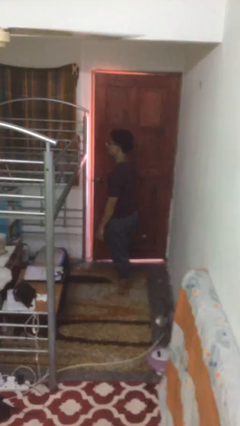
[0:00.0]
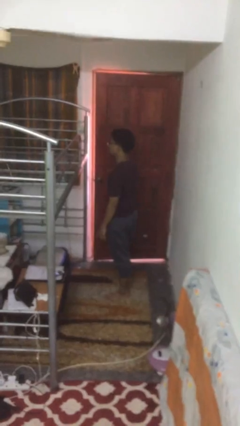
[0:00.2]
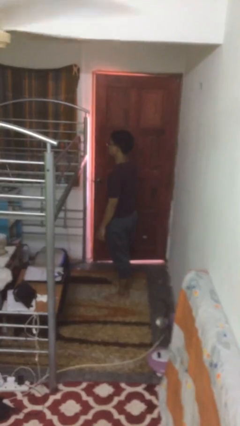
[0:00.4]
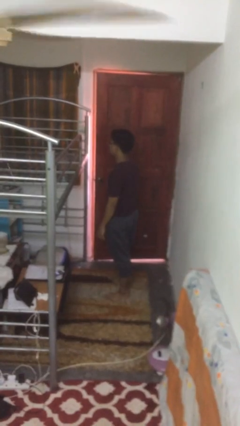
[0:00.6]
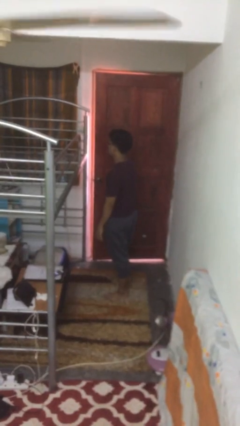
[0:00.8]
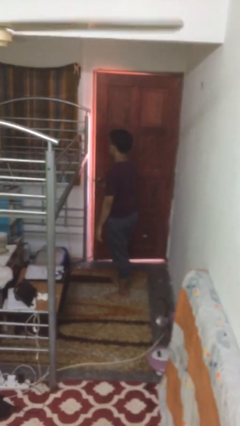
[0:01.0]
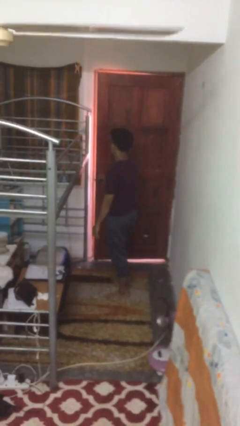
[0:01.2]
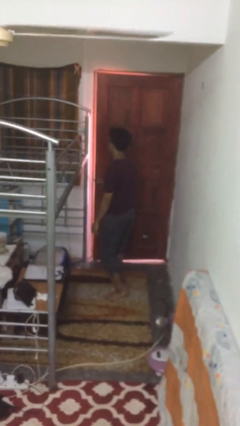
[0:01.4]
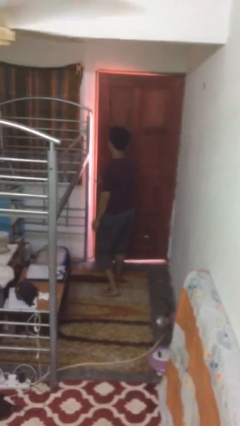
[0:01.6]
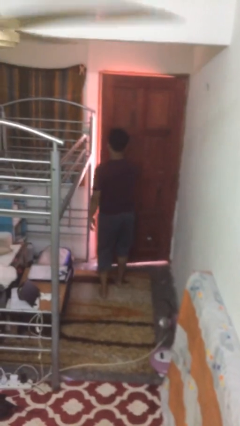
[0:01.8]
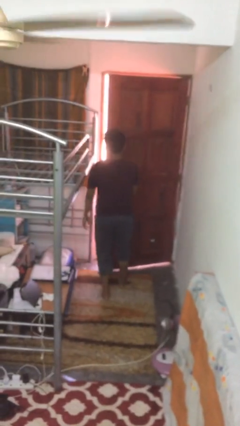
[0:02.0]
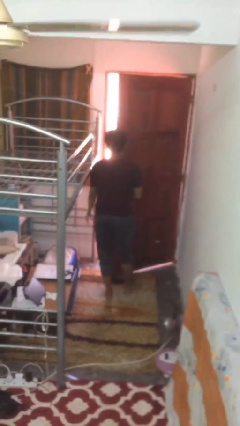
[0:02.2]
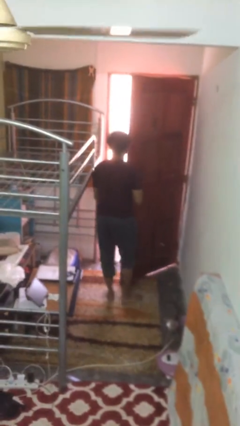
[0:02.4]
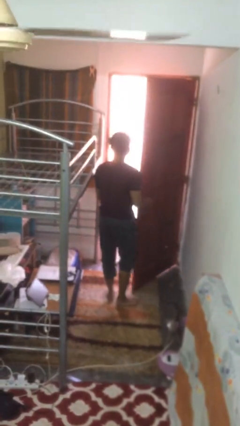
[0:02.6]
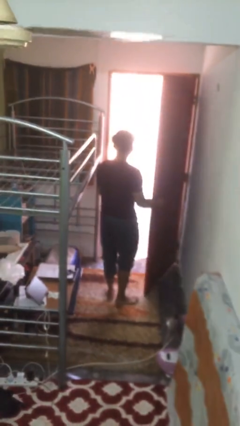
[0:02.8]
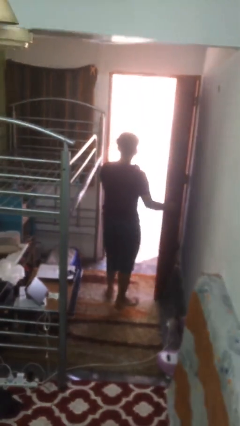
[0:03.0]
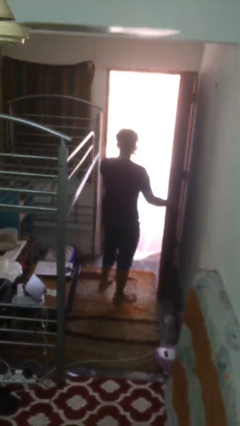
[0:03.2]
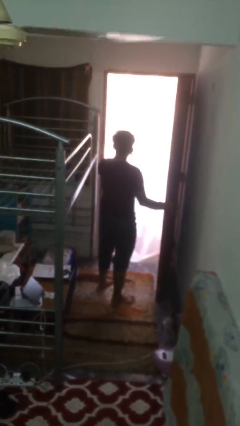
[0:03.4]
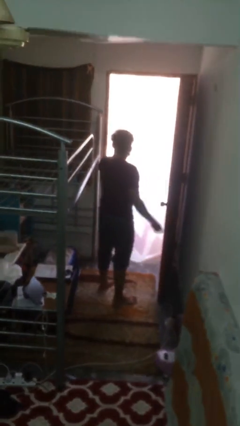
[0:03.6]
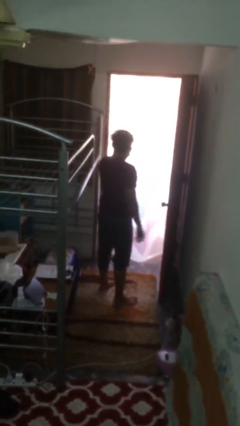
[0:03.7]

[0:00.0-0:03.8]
person opens facility door

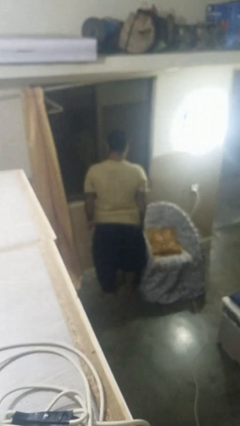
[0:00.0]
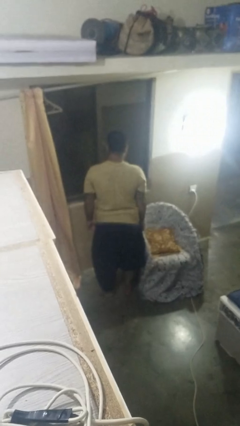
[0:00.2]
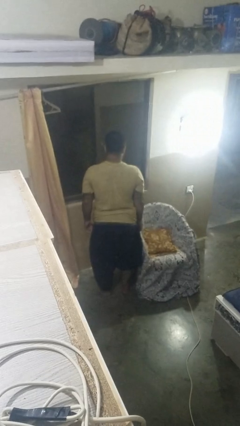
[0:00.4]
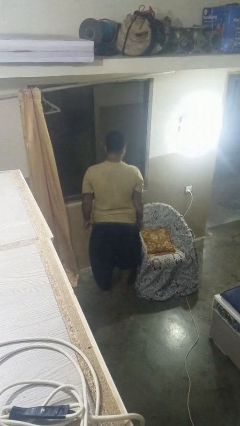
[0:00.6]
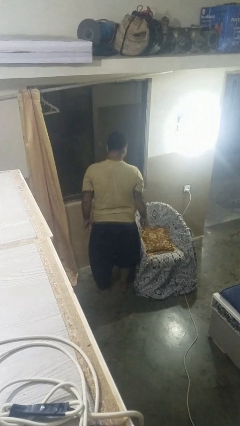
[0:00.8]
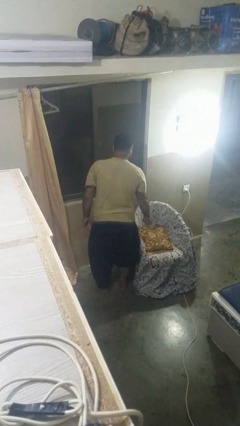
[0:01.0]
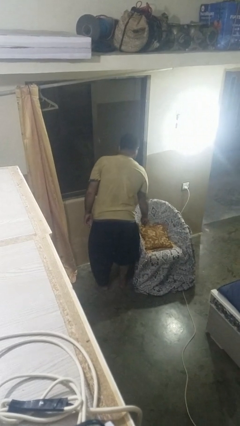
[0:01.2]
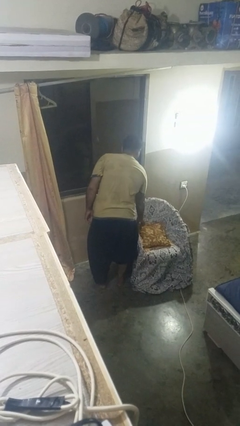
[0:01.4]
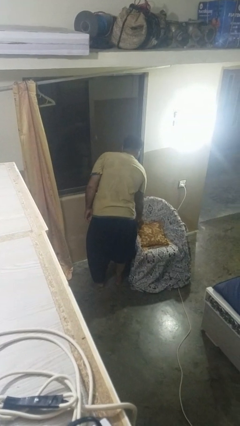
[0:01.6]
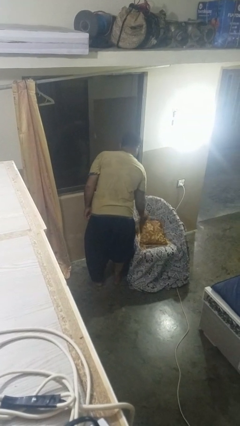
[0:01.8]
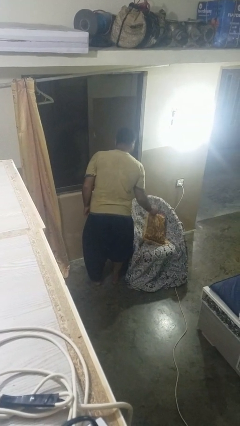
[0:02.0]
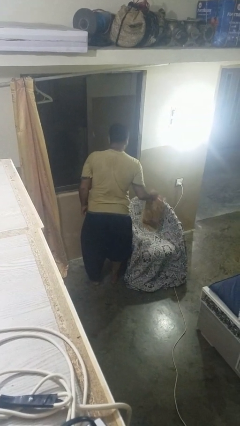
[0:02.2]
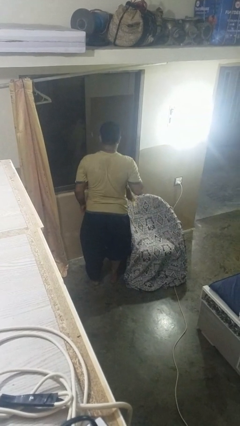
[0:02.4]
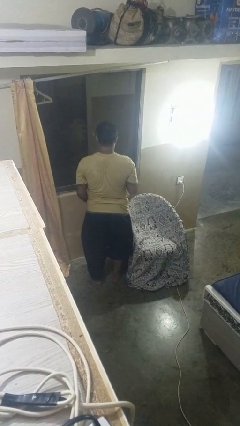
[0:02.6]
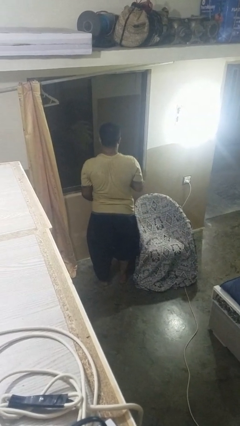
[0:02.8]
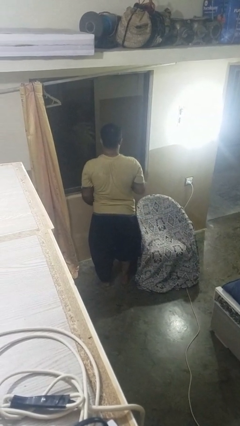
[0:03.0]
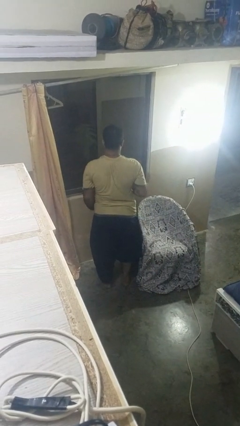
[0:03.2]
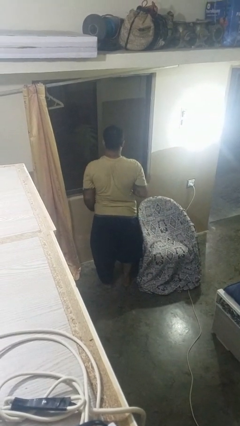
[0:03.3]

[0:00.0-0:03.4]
person picks up object from couch

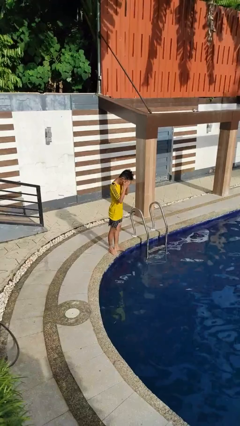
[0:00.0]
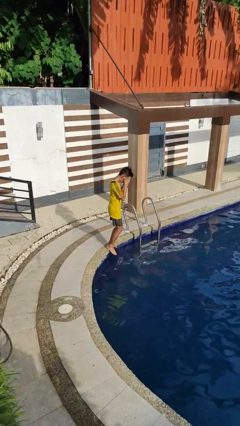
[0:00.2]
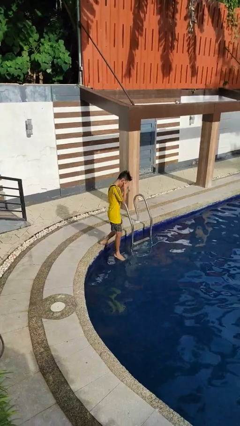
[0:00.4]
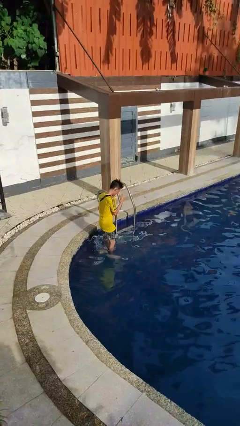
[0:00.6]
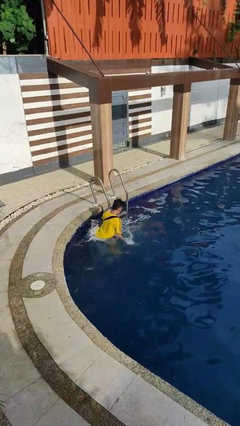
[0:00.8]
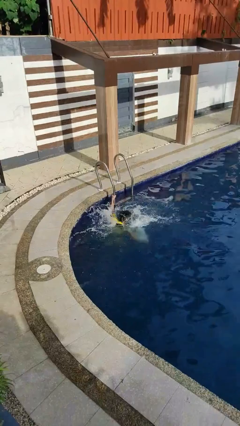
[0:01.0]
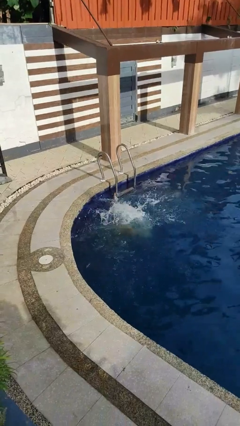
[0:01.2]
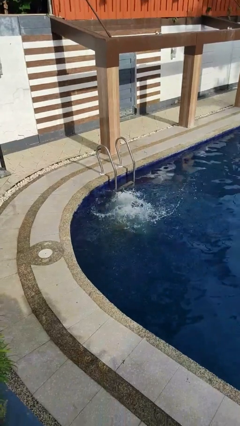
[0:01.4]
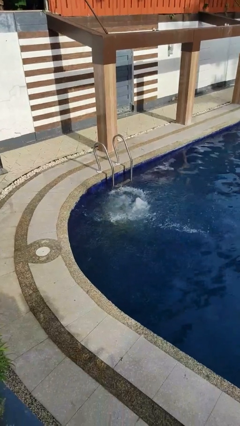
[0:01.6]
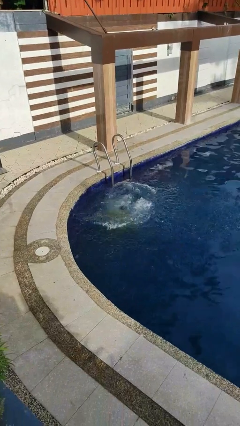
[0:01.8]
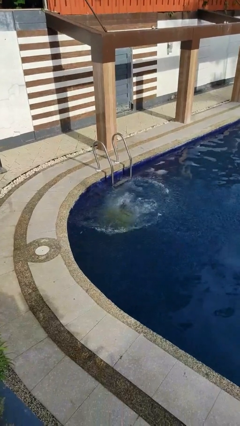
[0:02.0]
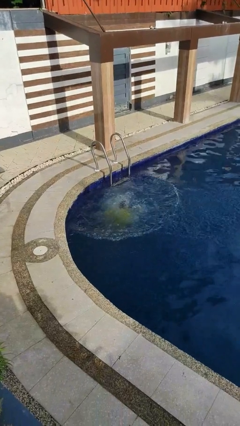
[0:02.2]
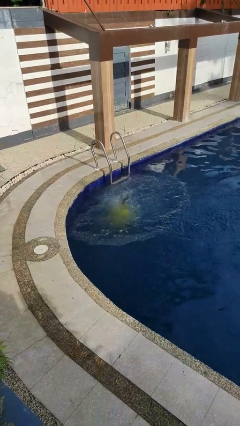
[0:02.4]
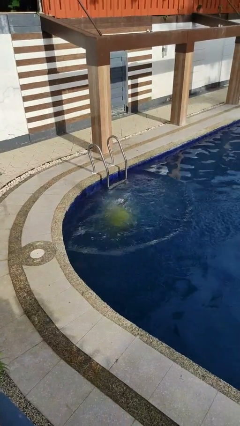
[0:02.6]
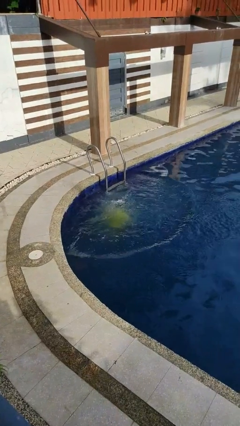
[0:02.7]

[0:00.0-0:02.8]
person falls into pool

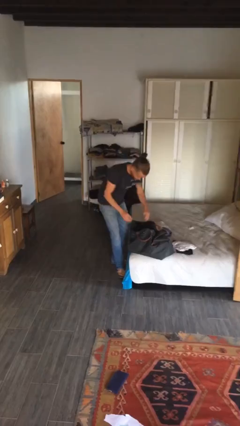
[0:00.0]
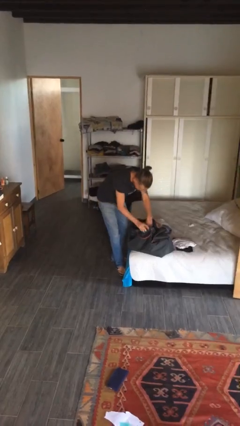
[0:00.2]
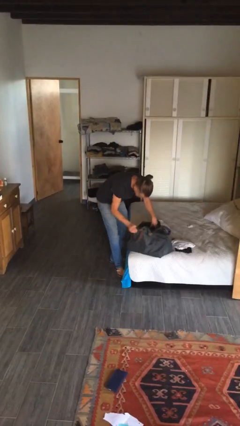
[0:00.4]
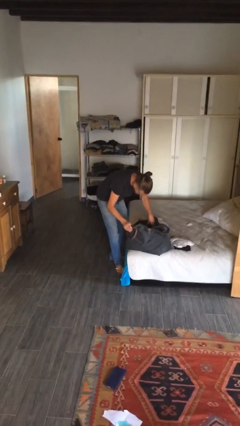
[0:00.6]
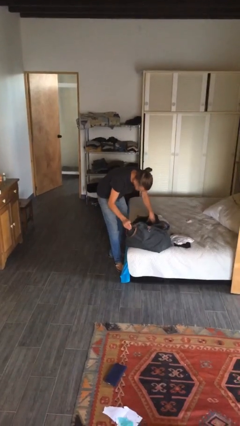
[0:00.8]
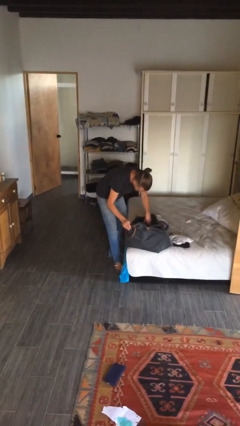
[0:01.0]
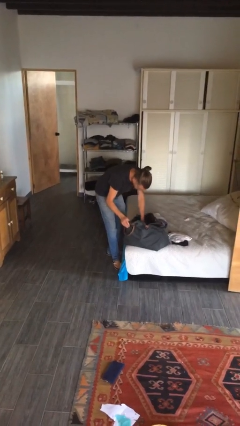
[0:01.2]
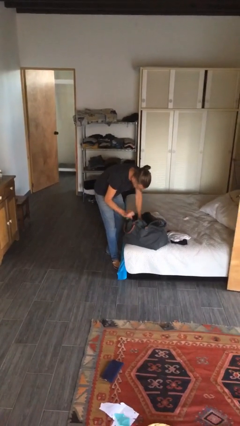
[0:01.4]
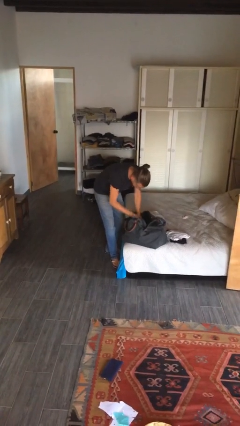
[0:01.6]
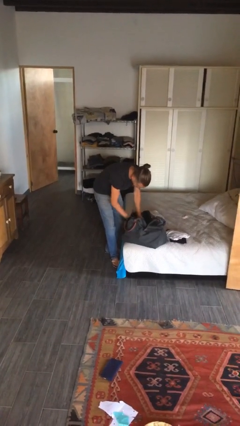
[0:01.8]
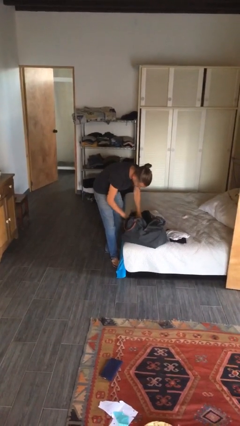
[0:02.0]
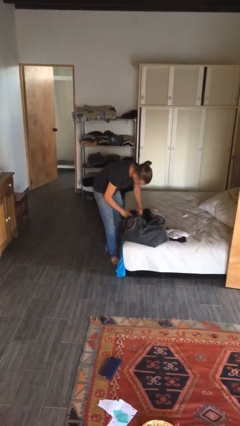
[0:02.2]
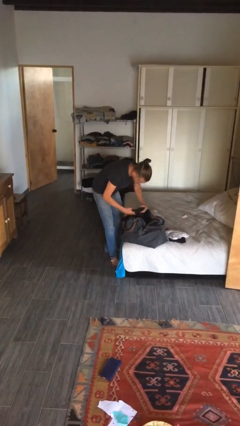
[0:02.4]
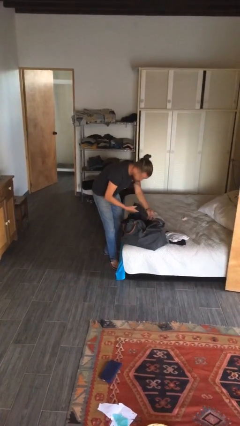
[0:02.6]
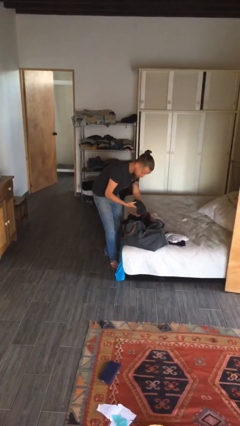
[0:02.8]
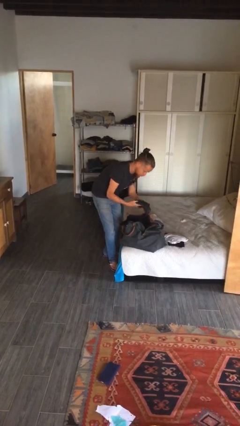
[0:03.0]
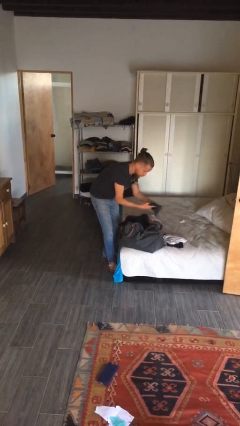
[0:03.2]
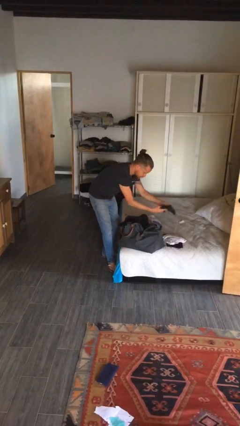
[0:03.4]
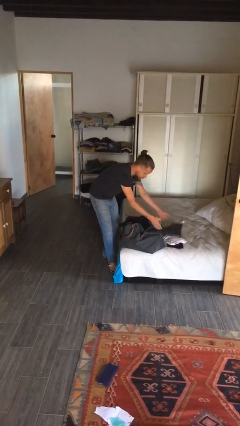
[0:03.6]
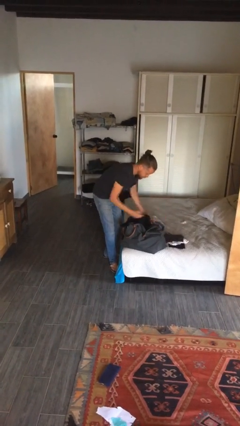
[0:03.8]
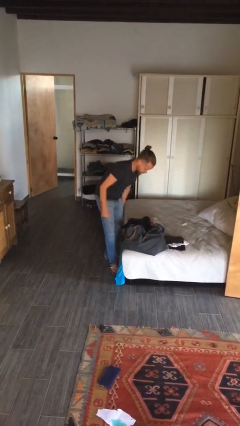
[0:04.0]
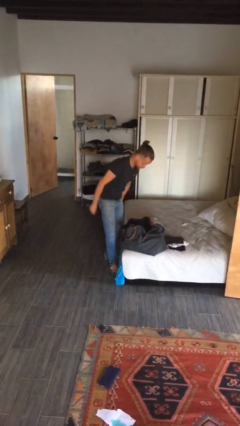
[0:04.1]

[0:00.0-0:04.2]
person unloads clothes from suitcase

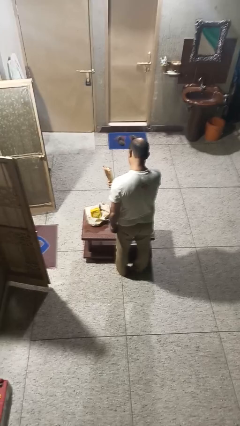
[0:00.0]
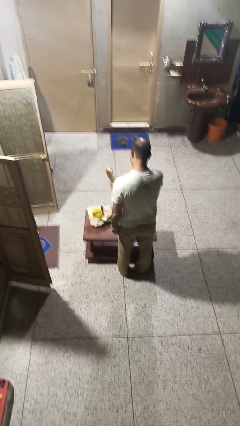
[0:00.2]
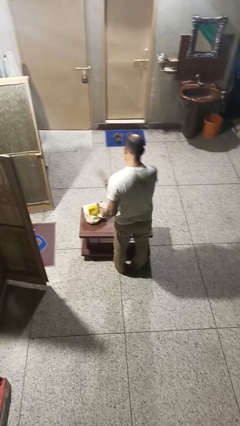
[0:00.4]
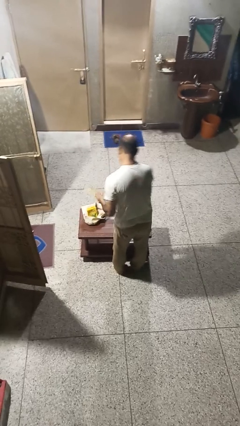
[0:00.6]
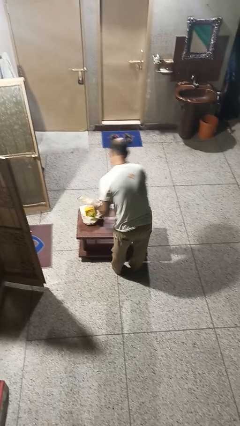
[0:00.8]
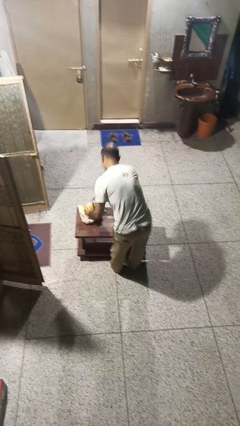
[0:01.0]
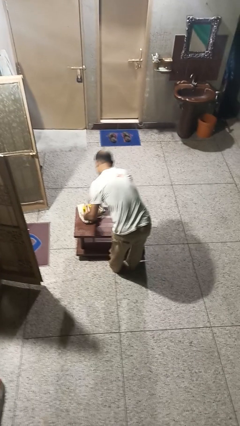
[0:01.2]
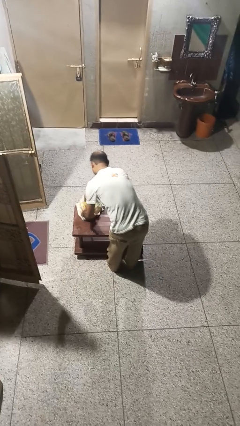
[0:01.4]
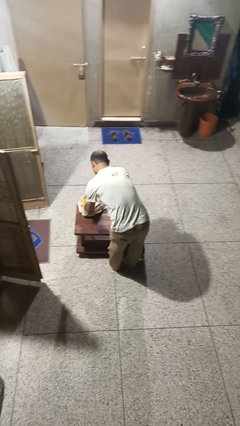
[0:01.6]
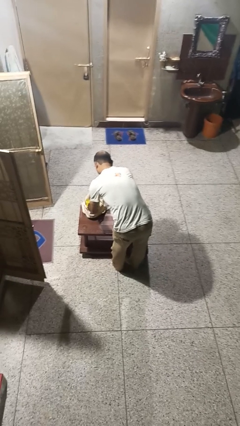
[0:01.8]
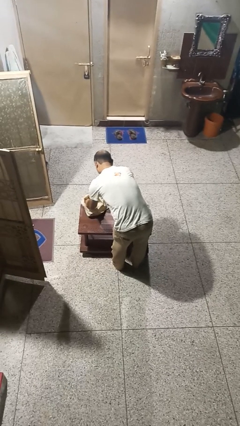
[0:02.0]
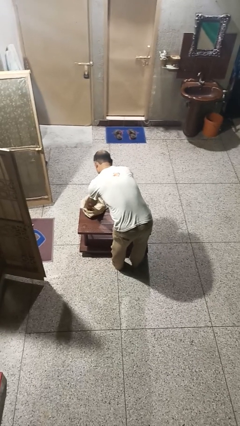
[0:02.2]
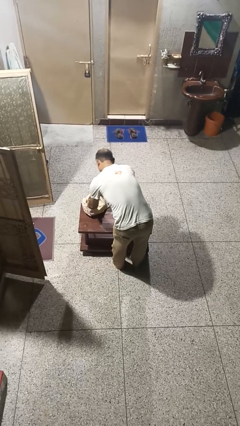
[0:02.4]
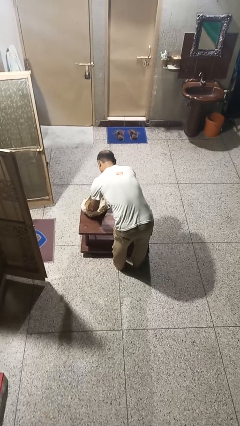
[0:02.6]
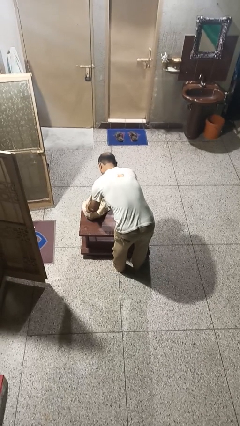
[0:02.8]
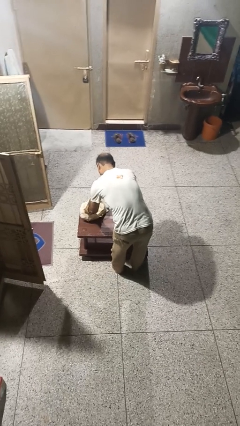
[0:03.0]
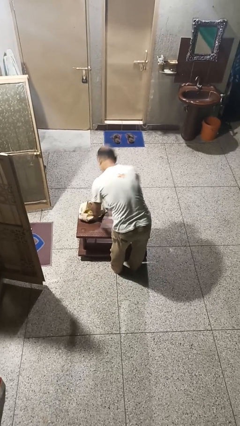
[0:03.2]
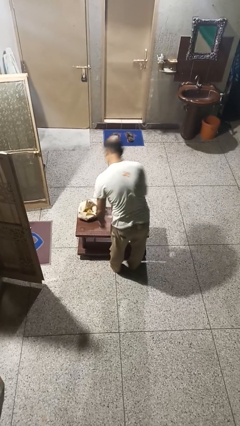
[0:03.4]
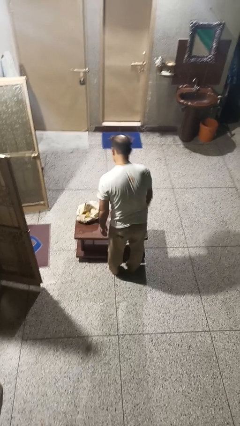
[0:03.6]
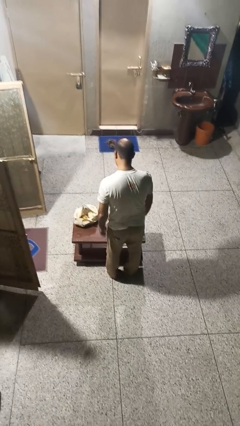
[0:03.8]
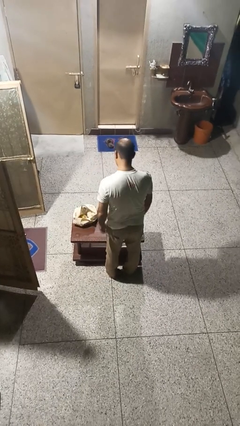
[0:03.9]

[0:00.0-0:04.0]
person puts object into bag
